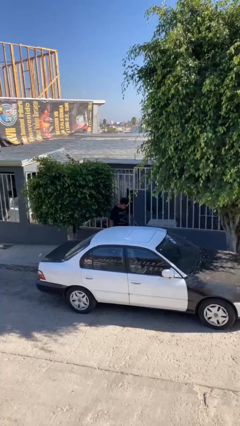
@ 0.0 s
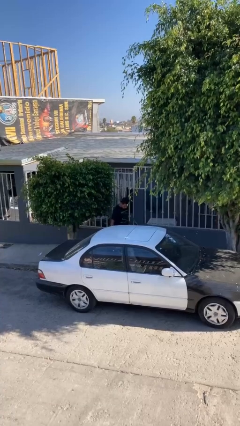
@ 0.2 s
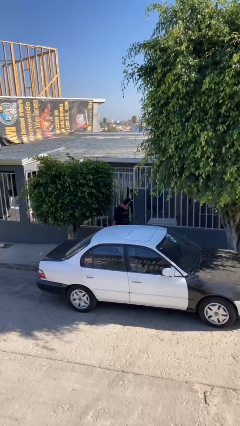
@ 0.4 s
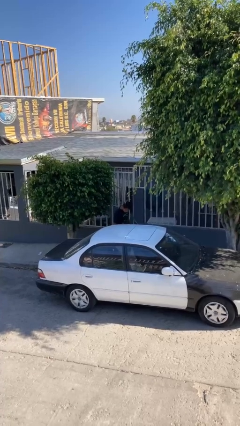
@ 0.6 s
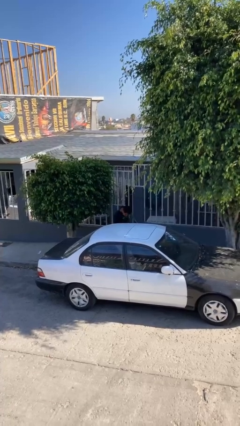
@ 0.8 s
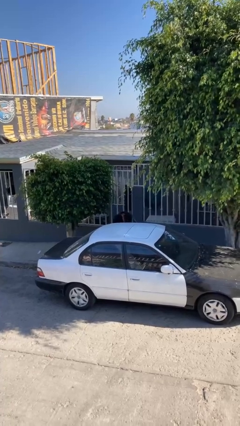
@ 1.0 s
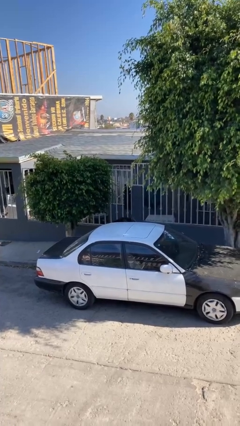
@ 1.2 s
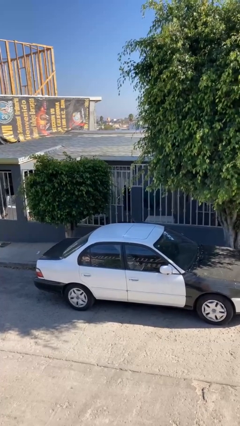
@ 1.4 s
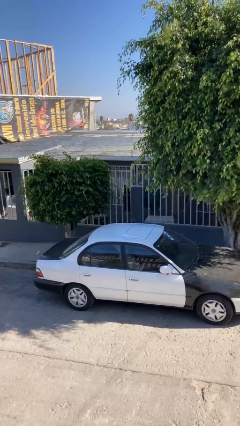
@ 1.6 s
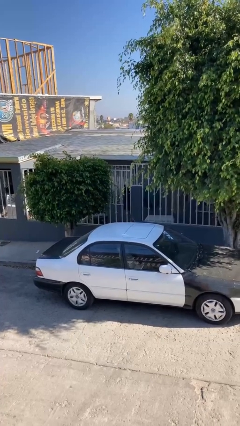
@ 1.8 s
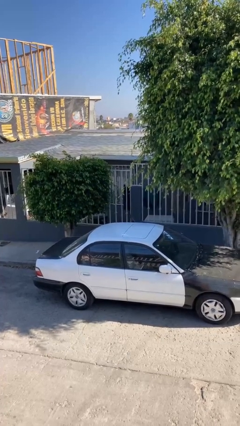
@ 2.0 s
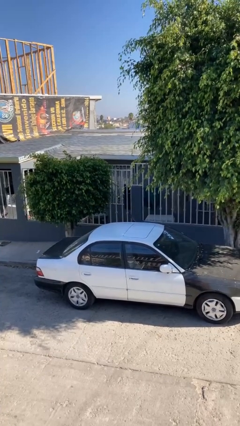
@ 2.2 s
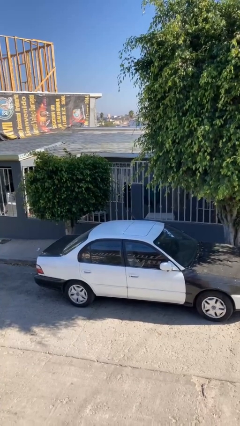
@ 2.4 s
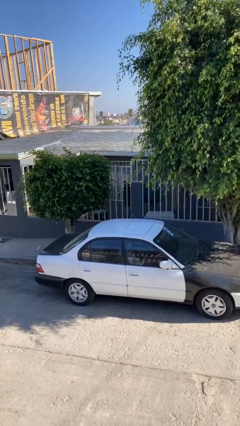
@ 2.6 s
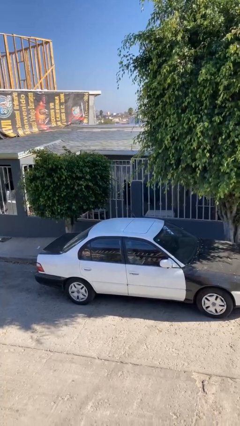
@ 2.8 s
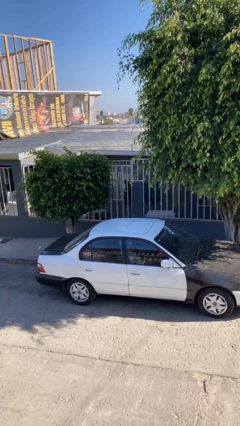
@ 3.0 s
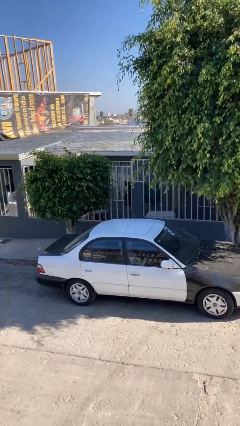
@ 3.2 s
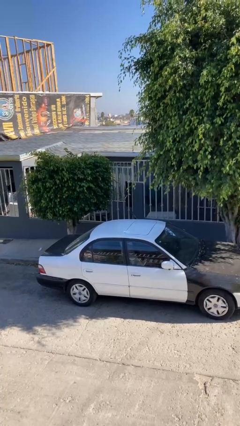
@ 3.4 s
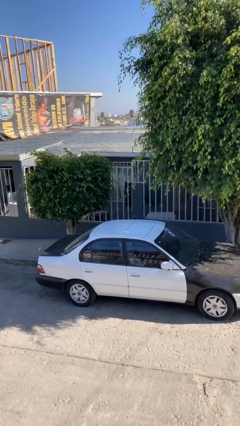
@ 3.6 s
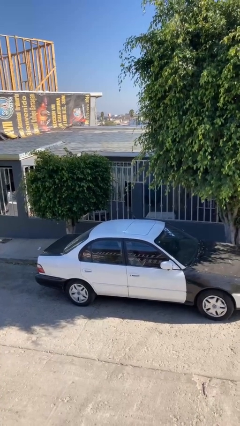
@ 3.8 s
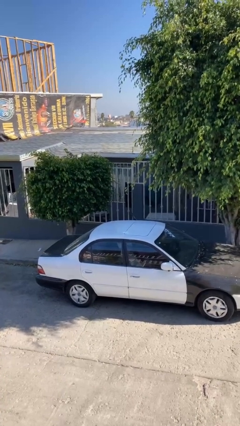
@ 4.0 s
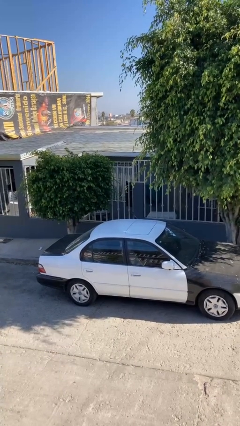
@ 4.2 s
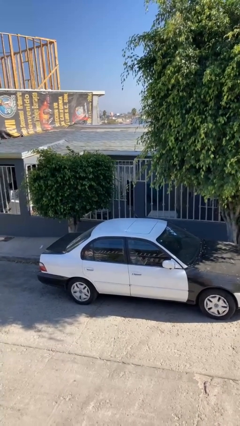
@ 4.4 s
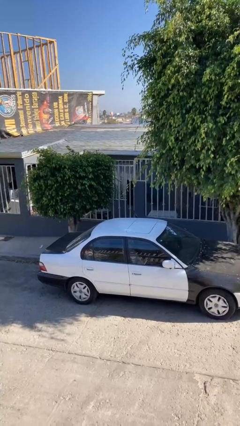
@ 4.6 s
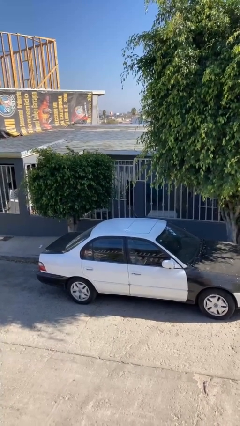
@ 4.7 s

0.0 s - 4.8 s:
person enters car

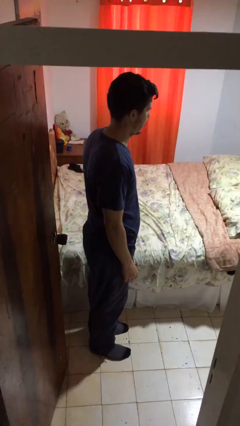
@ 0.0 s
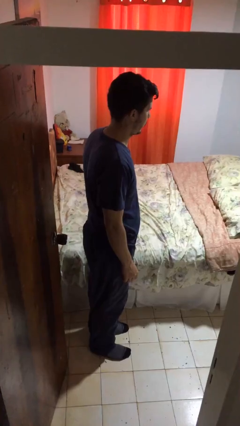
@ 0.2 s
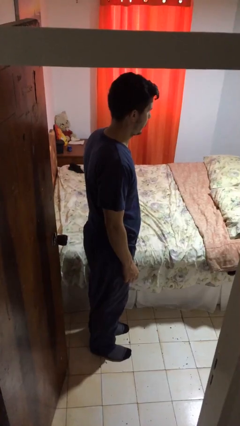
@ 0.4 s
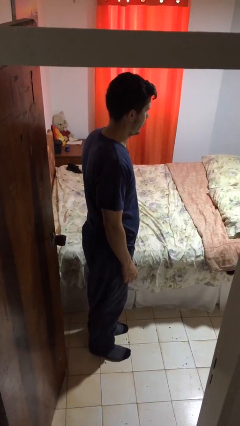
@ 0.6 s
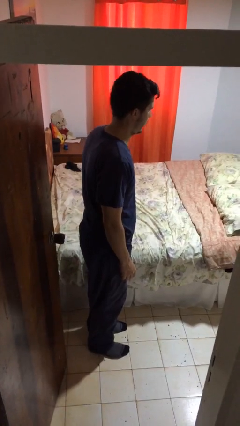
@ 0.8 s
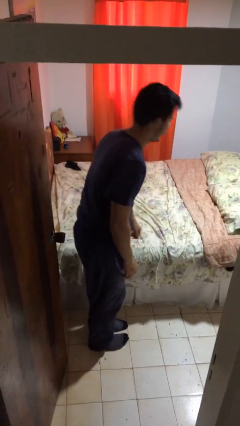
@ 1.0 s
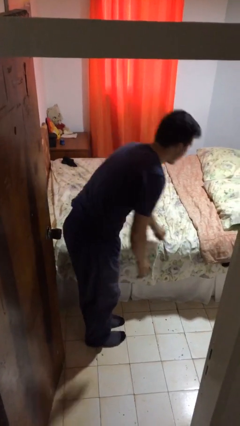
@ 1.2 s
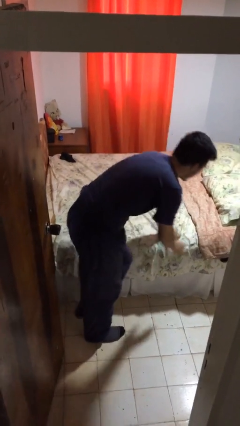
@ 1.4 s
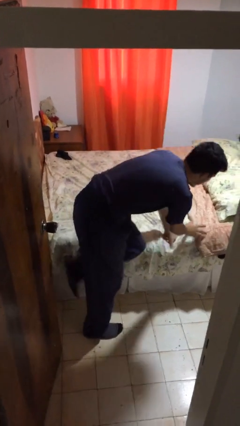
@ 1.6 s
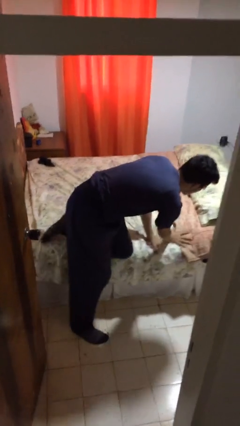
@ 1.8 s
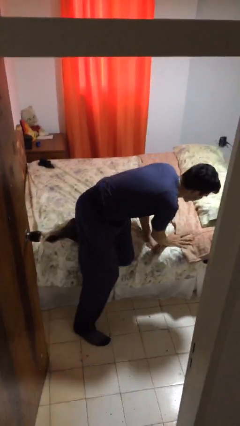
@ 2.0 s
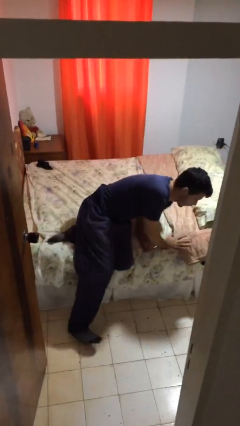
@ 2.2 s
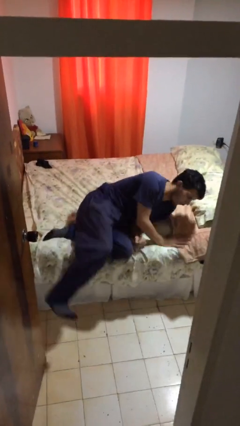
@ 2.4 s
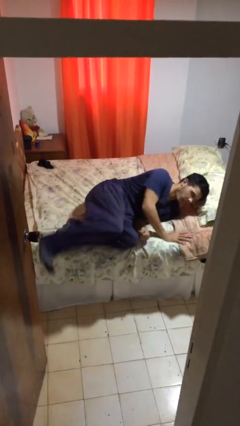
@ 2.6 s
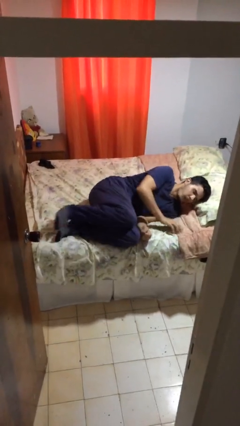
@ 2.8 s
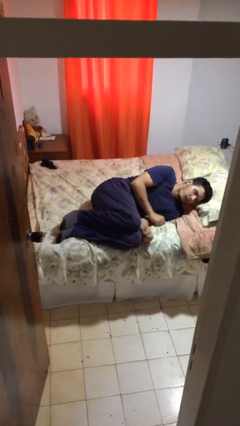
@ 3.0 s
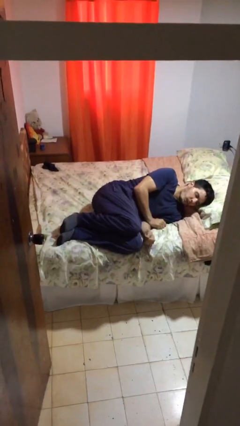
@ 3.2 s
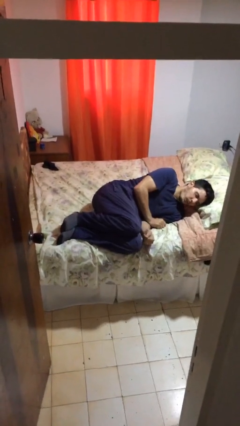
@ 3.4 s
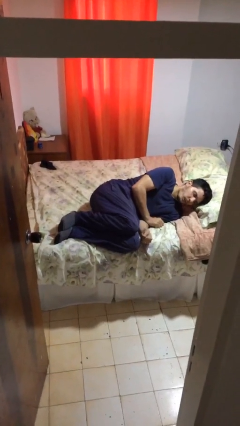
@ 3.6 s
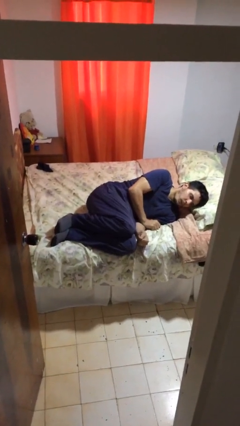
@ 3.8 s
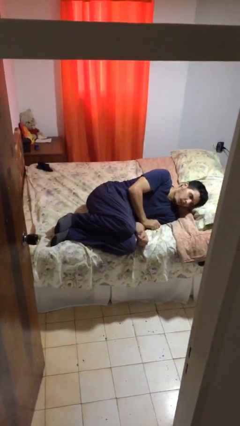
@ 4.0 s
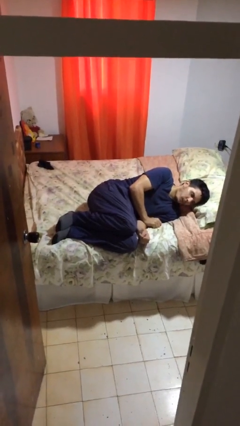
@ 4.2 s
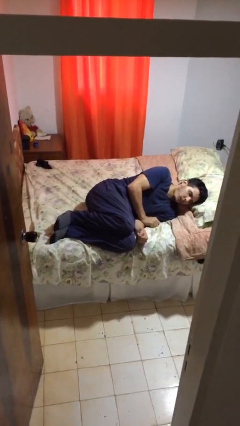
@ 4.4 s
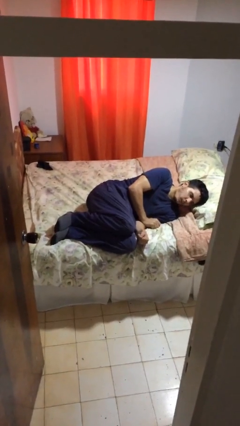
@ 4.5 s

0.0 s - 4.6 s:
person lies down on bed

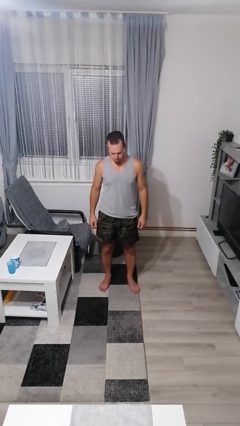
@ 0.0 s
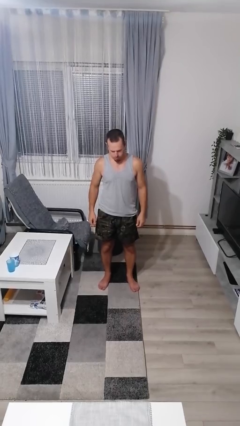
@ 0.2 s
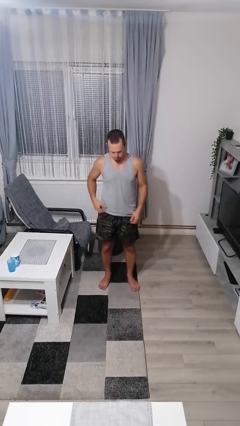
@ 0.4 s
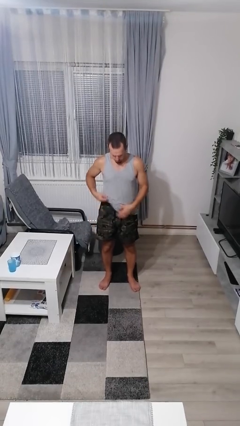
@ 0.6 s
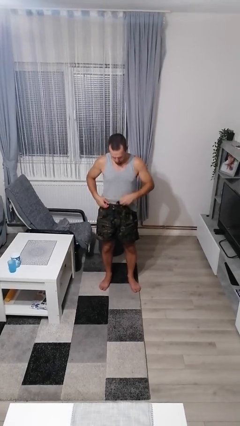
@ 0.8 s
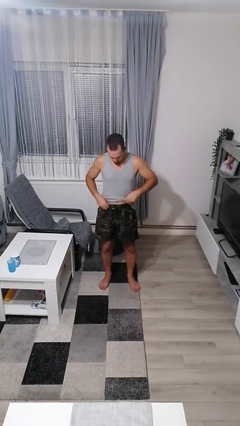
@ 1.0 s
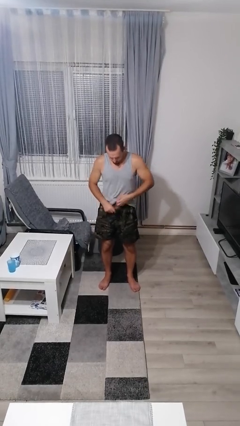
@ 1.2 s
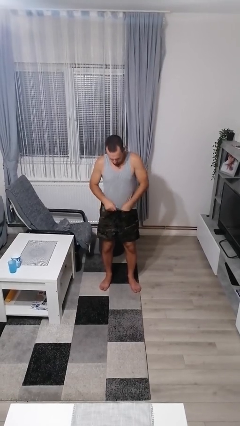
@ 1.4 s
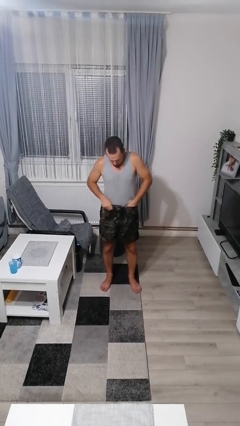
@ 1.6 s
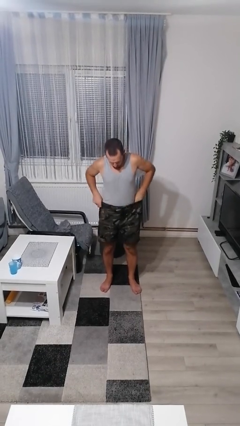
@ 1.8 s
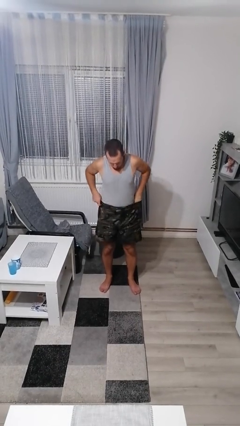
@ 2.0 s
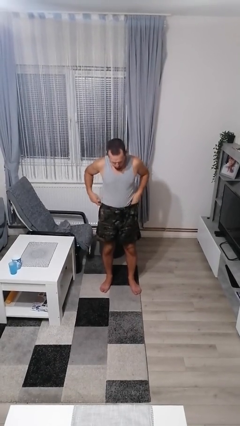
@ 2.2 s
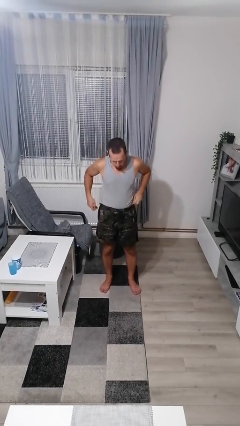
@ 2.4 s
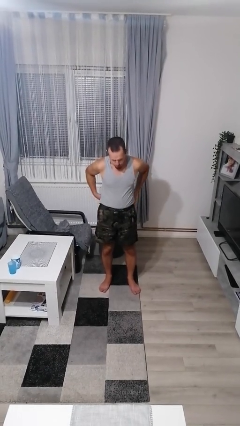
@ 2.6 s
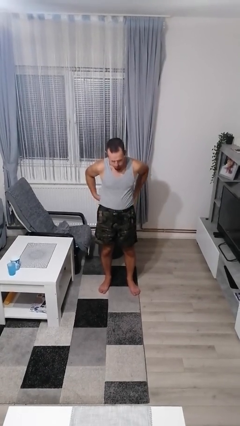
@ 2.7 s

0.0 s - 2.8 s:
person tucks in shirt

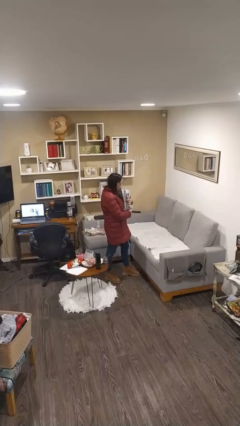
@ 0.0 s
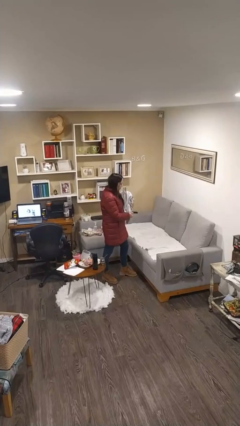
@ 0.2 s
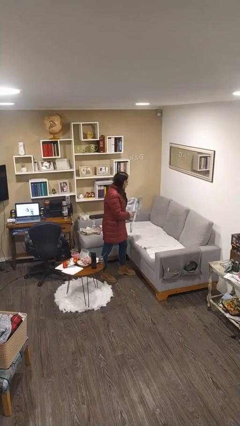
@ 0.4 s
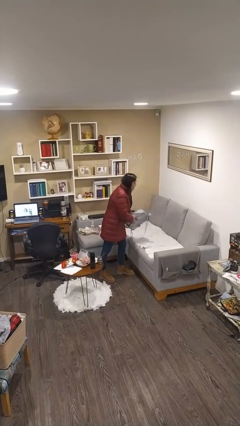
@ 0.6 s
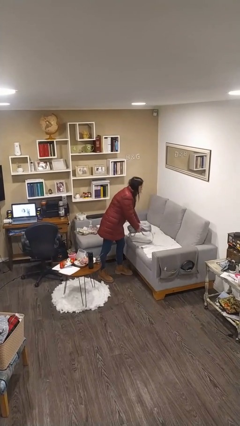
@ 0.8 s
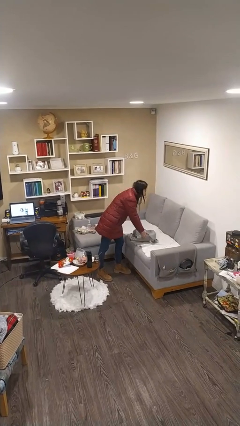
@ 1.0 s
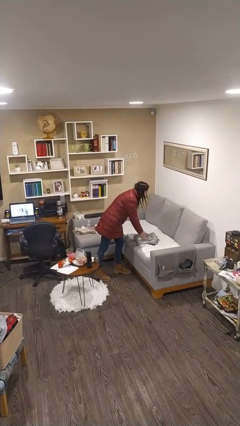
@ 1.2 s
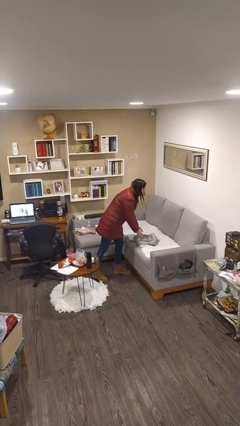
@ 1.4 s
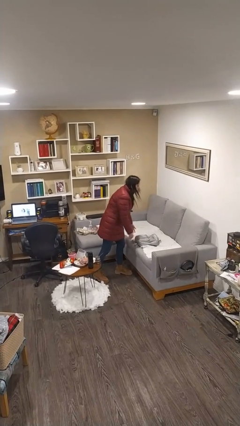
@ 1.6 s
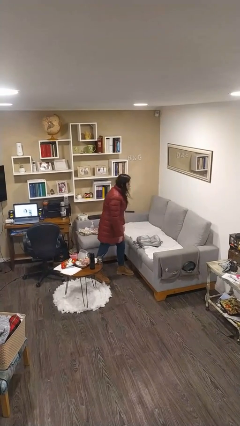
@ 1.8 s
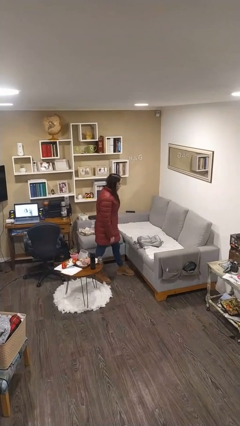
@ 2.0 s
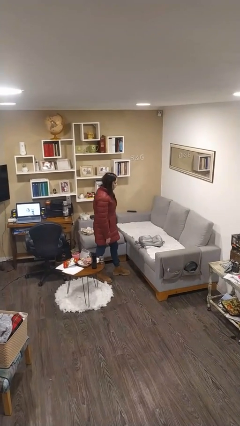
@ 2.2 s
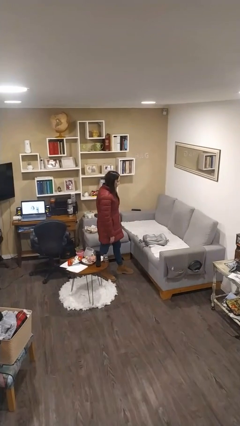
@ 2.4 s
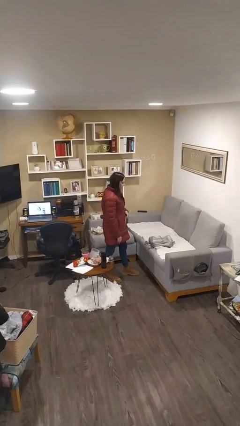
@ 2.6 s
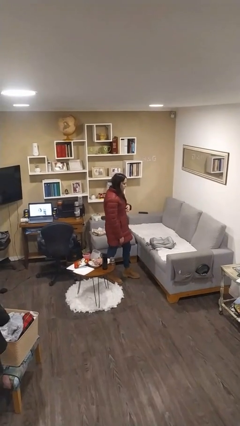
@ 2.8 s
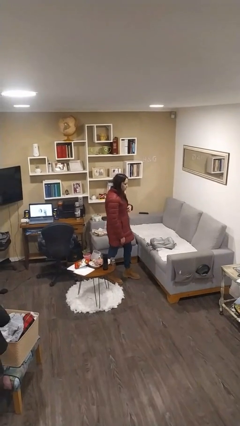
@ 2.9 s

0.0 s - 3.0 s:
person puts down object on couch

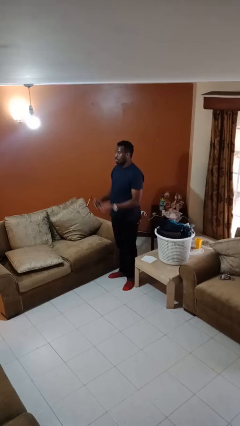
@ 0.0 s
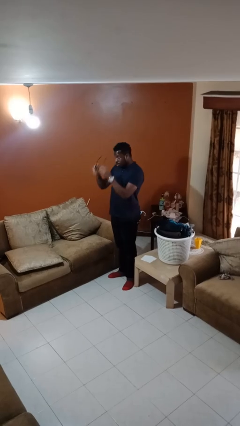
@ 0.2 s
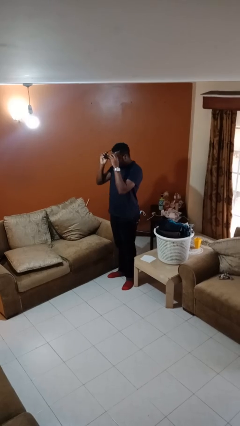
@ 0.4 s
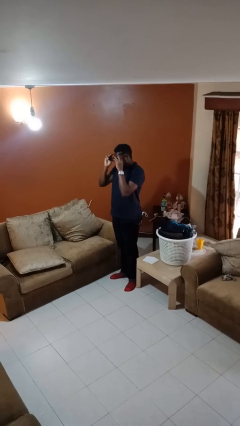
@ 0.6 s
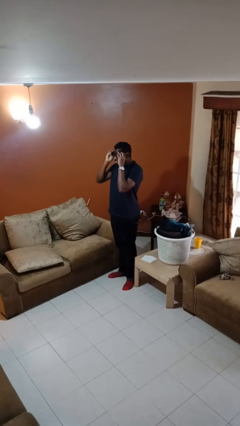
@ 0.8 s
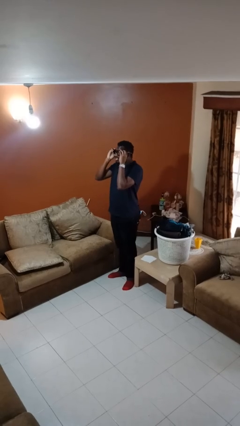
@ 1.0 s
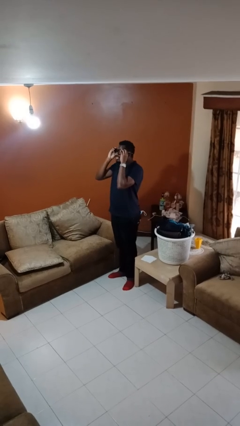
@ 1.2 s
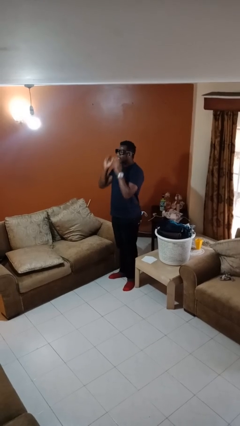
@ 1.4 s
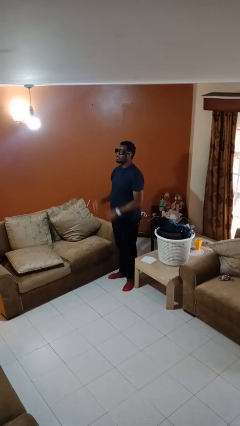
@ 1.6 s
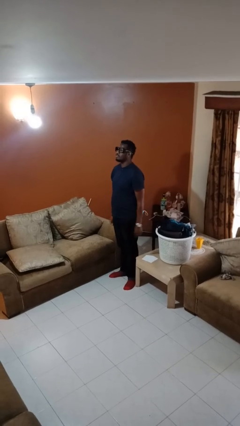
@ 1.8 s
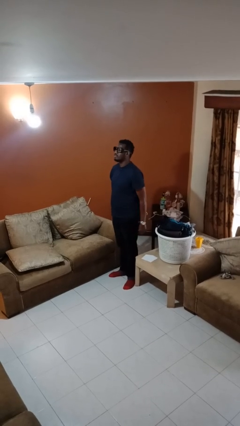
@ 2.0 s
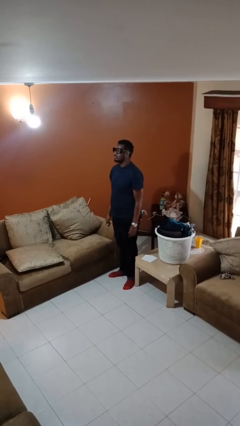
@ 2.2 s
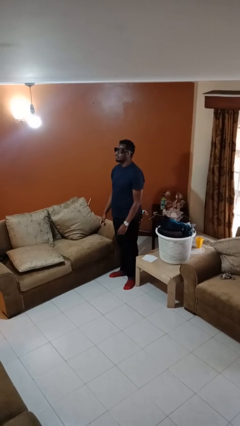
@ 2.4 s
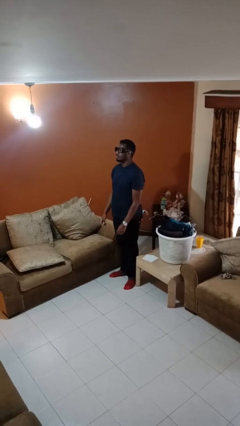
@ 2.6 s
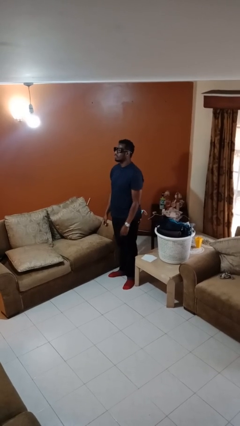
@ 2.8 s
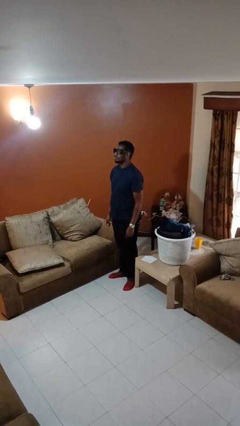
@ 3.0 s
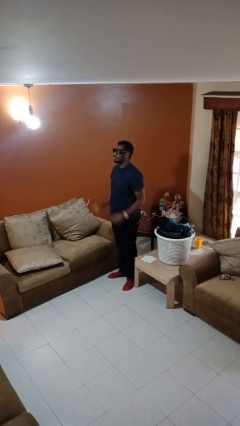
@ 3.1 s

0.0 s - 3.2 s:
person puts on glasses
